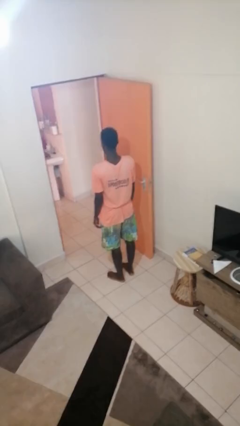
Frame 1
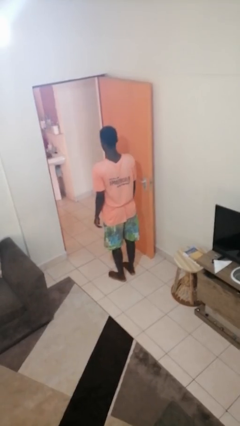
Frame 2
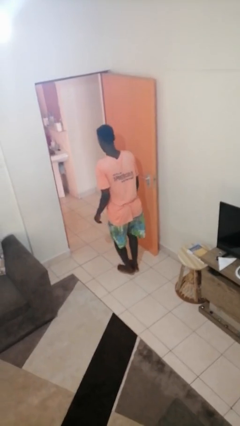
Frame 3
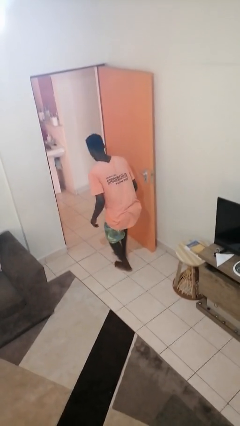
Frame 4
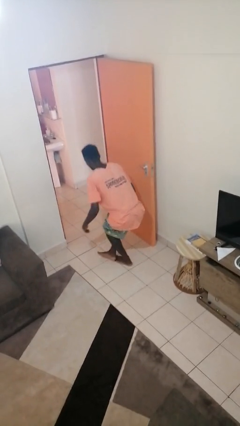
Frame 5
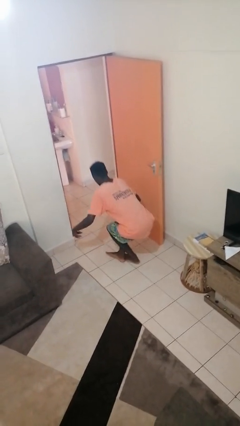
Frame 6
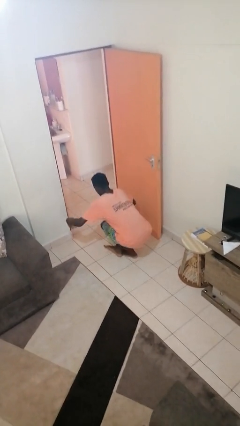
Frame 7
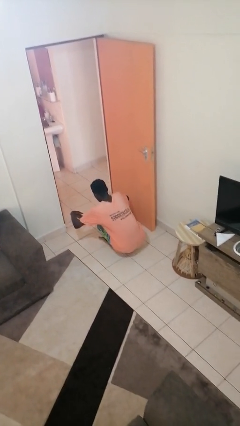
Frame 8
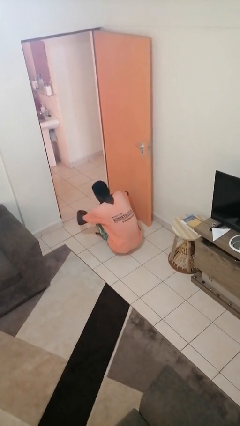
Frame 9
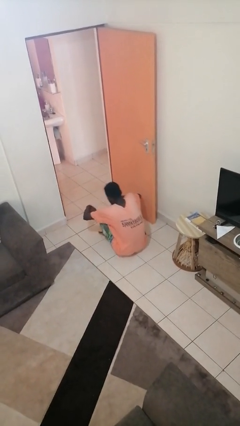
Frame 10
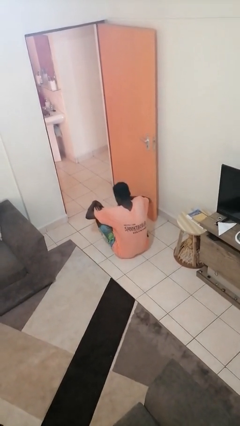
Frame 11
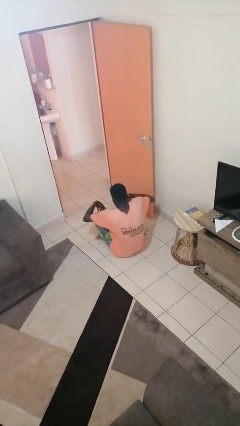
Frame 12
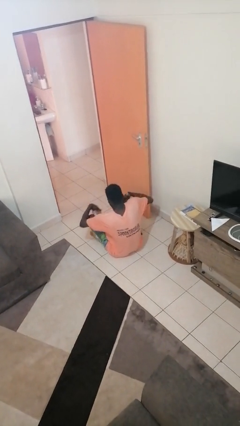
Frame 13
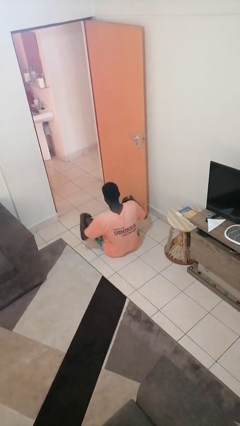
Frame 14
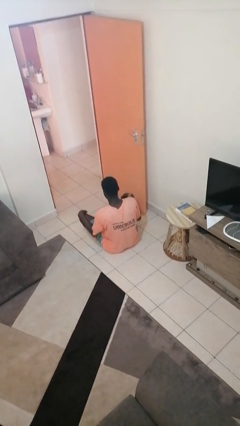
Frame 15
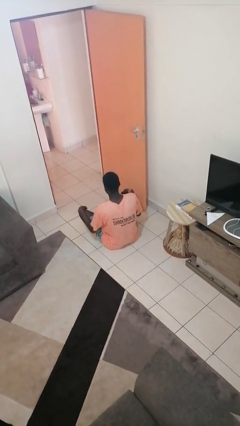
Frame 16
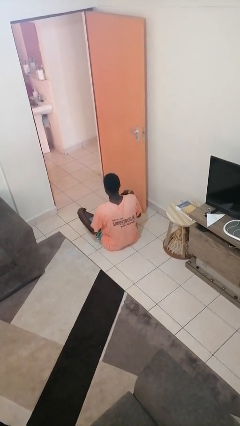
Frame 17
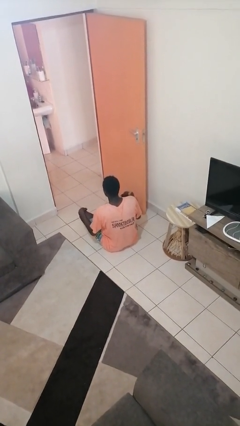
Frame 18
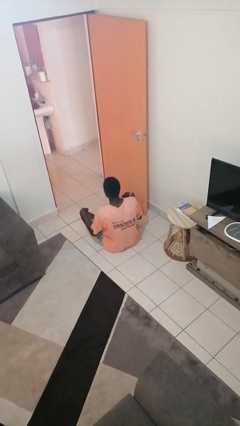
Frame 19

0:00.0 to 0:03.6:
person sits crisscross

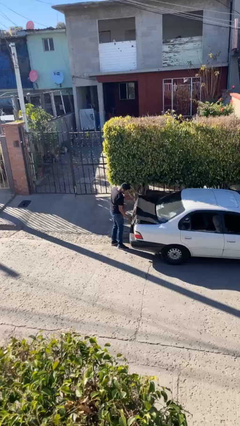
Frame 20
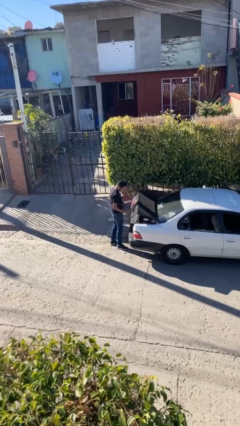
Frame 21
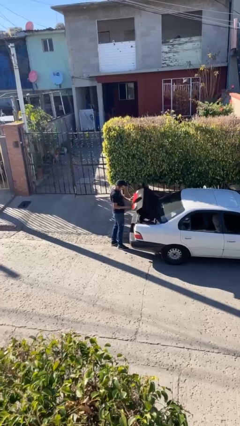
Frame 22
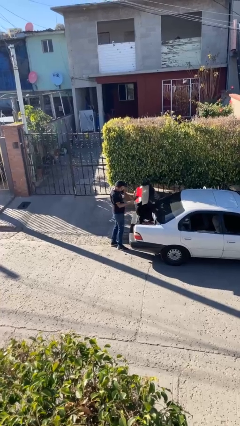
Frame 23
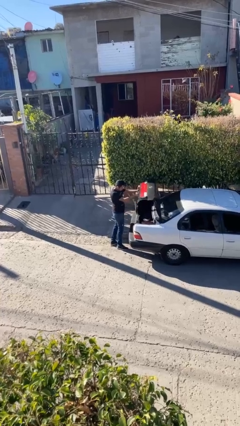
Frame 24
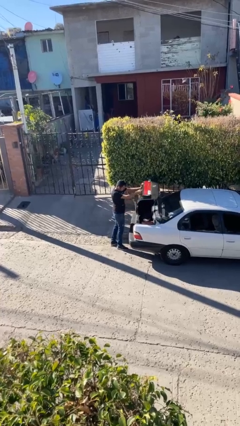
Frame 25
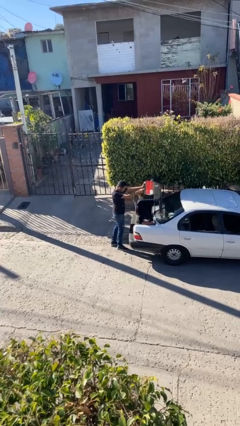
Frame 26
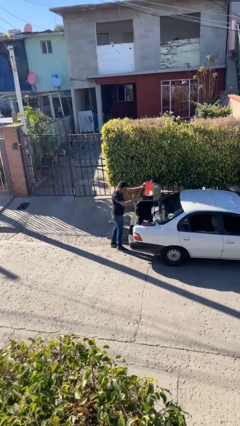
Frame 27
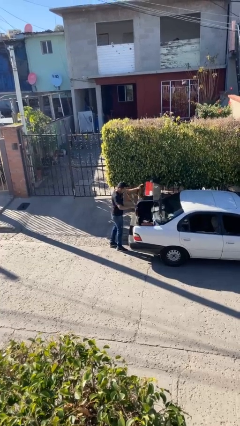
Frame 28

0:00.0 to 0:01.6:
person opens car trunk

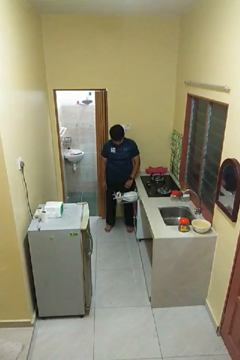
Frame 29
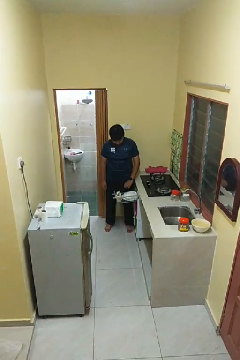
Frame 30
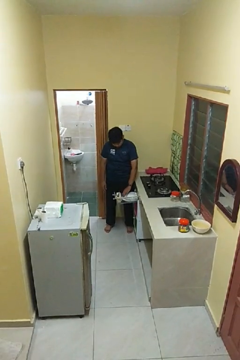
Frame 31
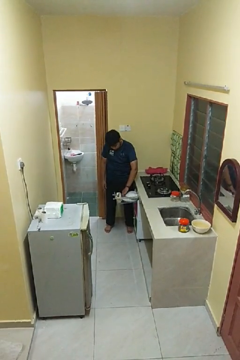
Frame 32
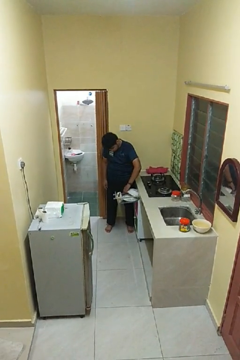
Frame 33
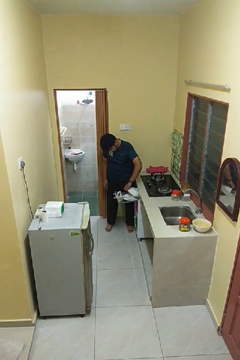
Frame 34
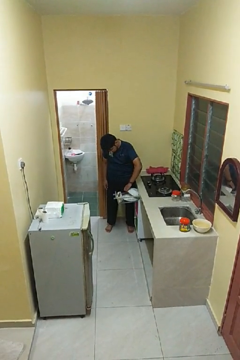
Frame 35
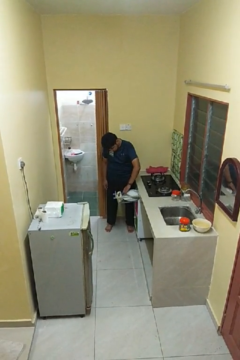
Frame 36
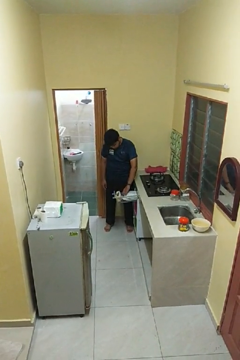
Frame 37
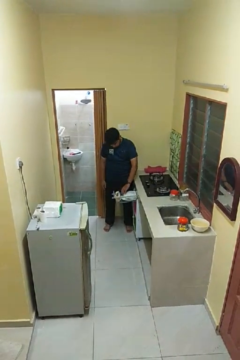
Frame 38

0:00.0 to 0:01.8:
person searches in kitchen drawer

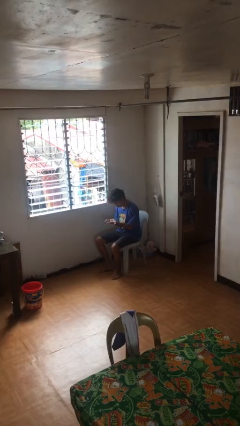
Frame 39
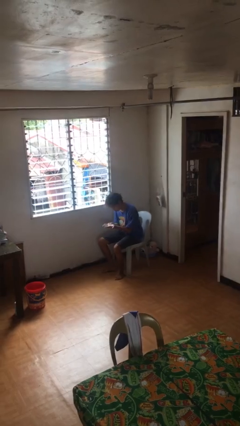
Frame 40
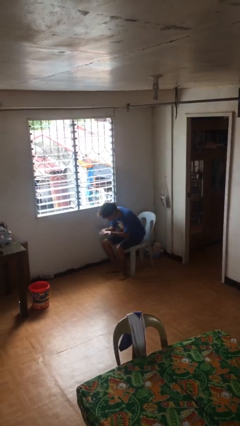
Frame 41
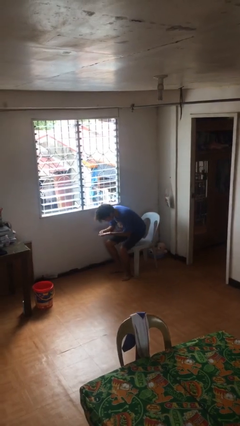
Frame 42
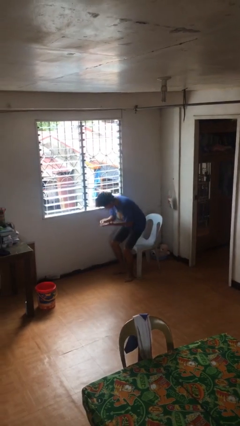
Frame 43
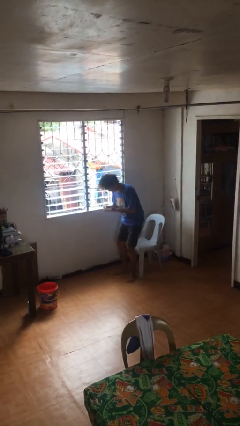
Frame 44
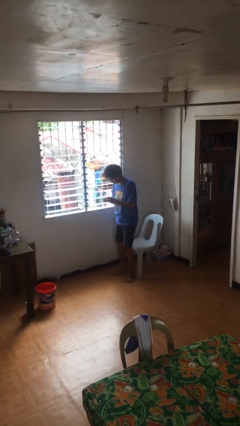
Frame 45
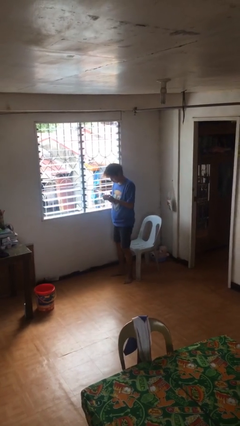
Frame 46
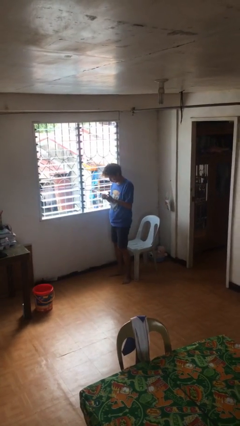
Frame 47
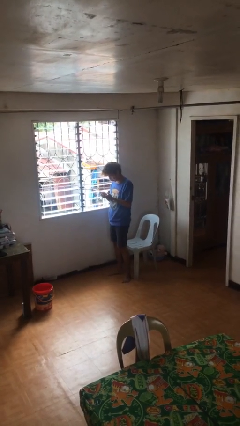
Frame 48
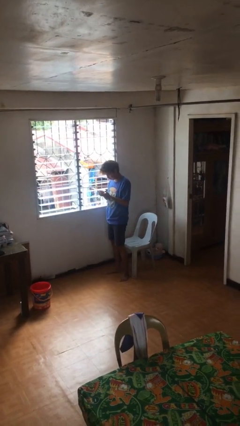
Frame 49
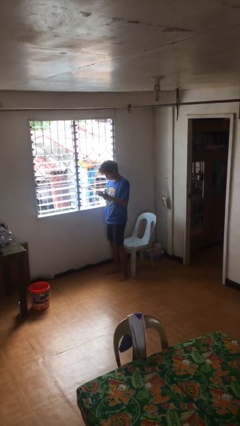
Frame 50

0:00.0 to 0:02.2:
person stands up

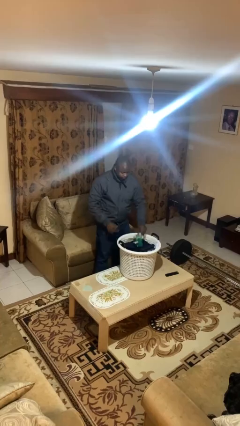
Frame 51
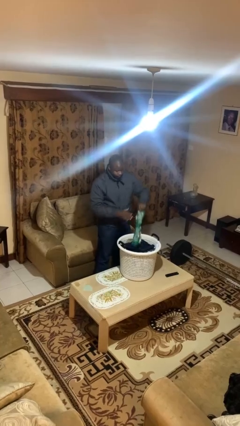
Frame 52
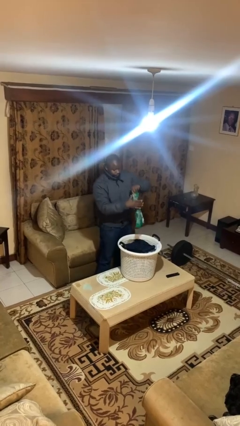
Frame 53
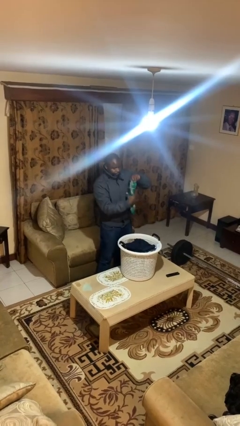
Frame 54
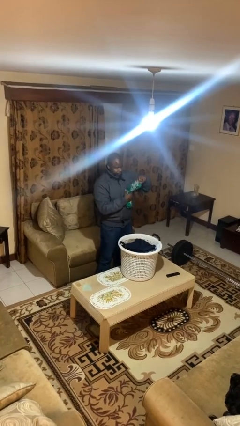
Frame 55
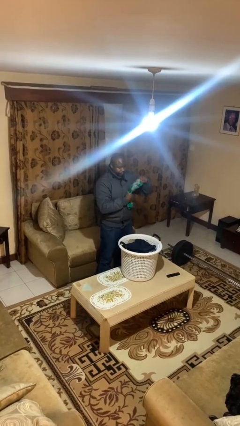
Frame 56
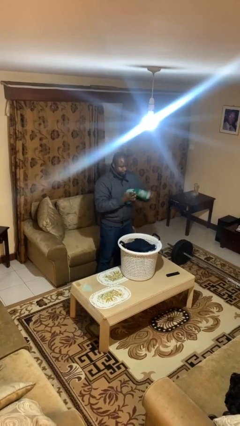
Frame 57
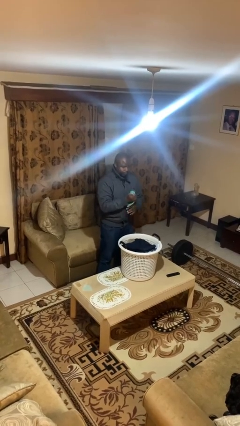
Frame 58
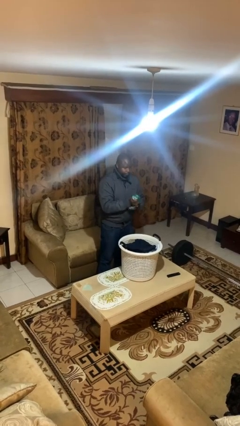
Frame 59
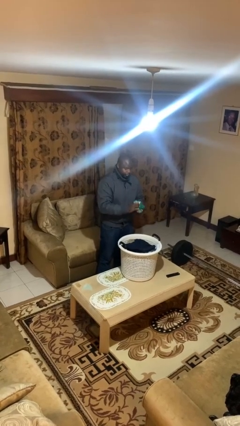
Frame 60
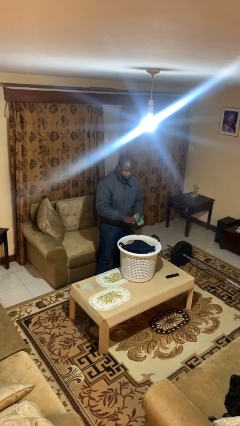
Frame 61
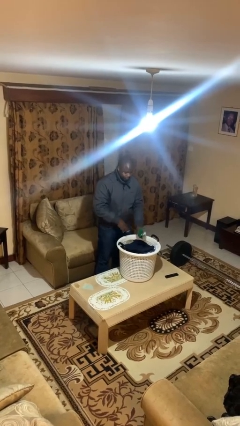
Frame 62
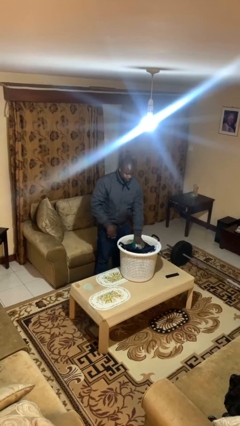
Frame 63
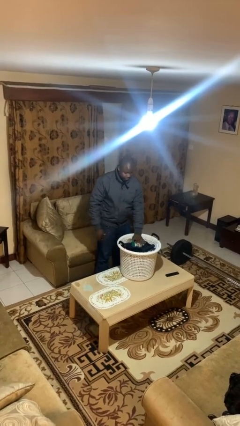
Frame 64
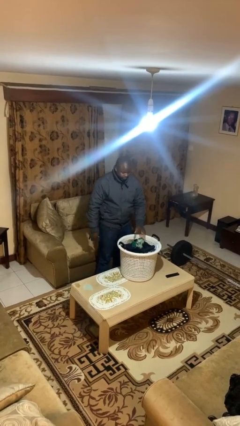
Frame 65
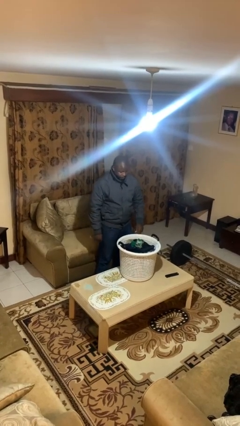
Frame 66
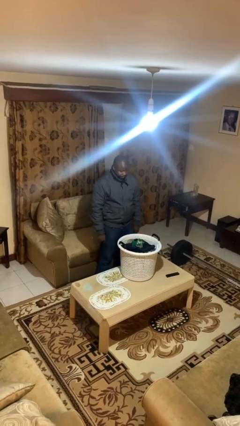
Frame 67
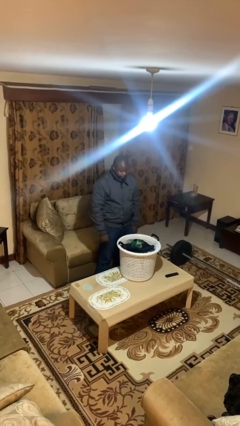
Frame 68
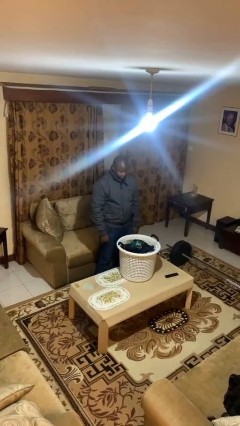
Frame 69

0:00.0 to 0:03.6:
person folds socks

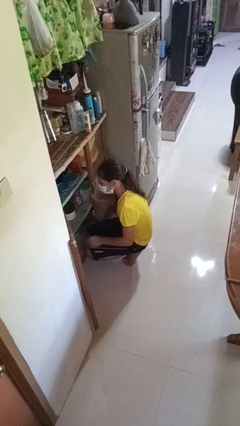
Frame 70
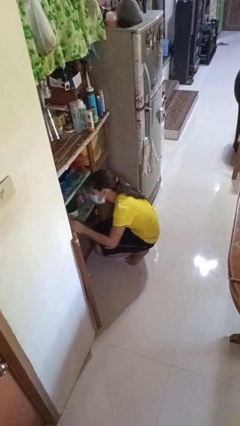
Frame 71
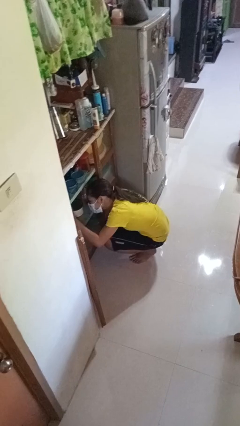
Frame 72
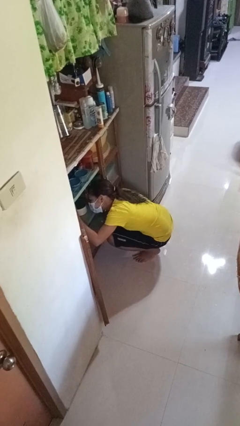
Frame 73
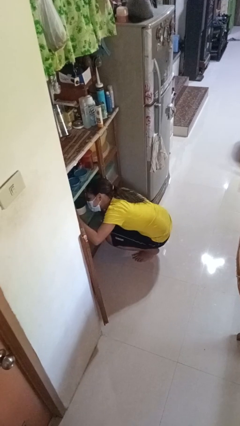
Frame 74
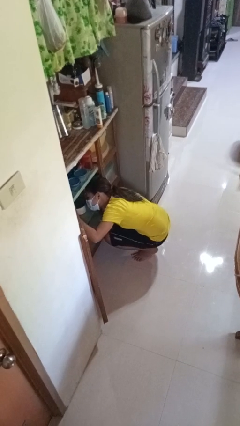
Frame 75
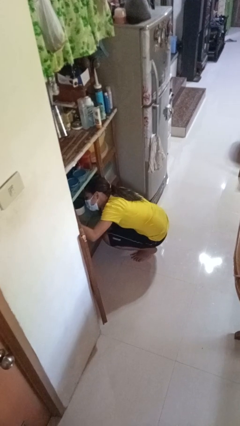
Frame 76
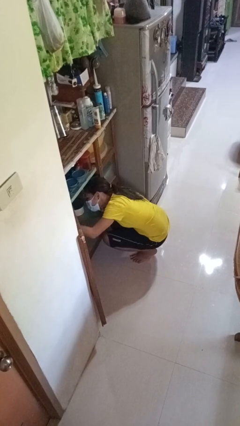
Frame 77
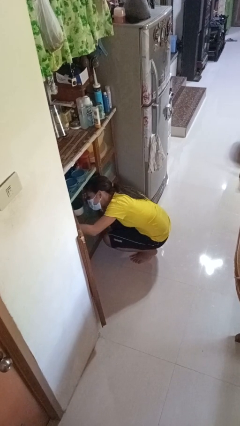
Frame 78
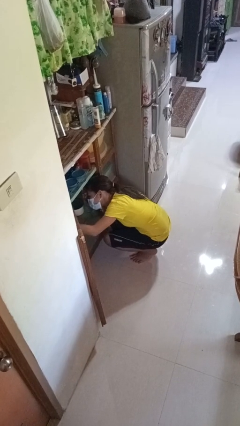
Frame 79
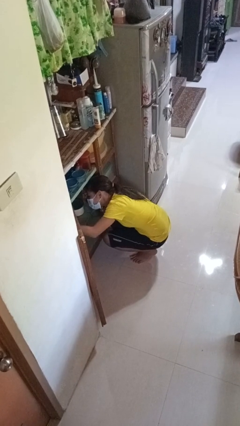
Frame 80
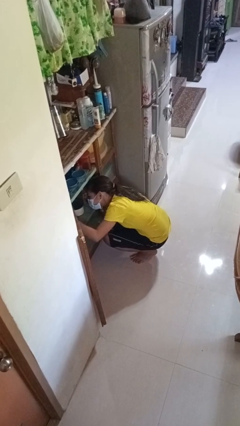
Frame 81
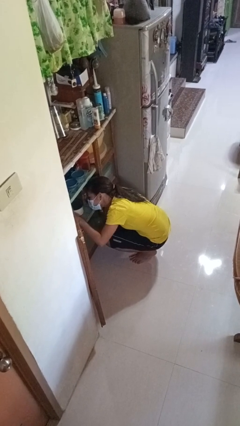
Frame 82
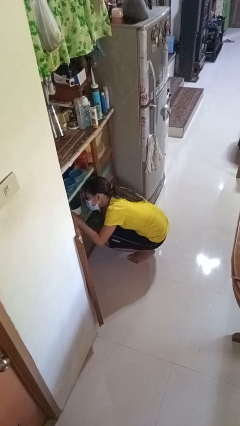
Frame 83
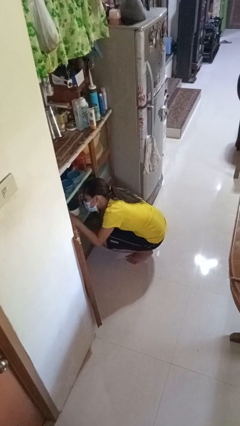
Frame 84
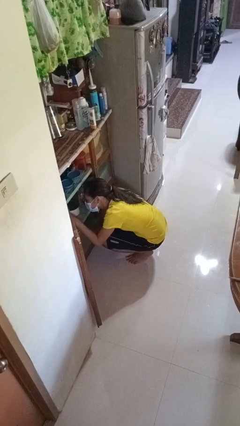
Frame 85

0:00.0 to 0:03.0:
person searches in cabinet

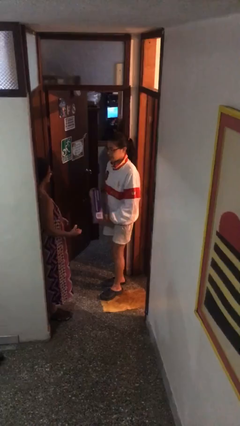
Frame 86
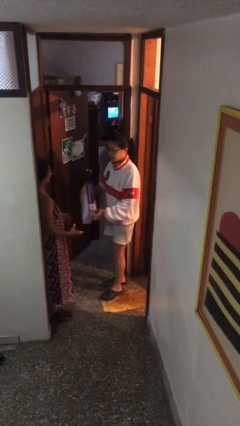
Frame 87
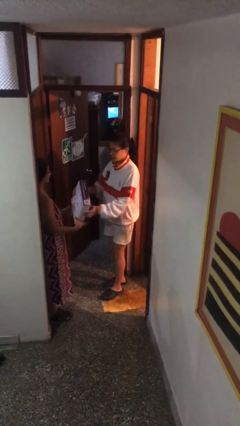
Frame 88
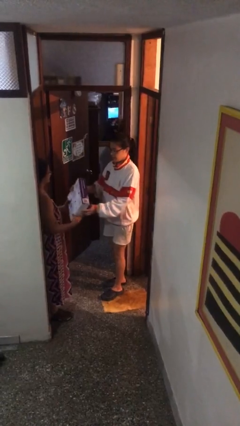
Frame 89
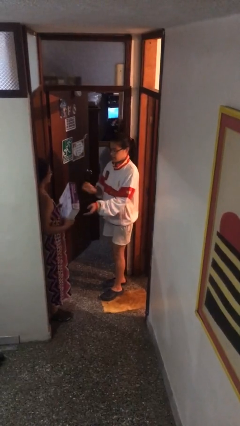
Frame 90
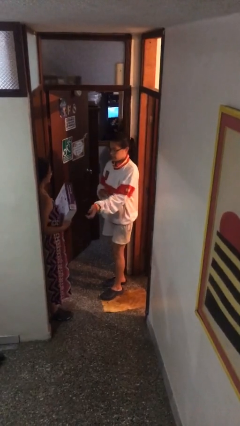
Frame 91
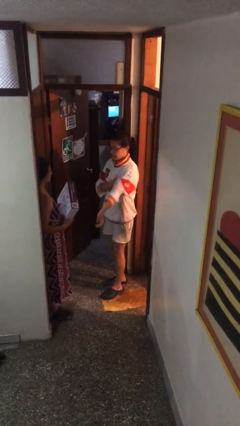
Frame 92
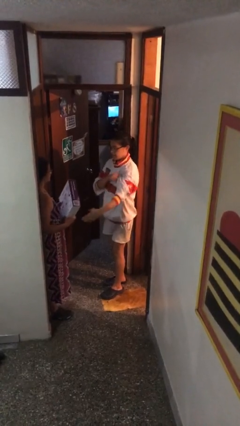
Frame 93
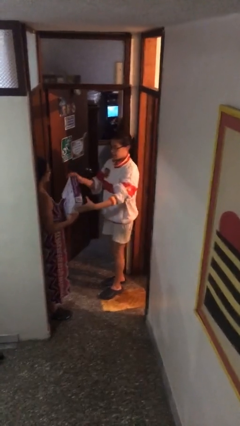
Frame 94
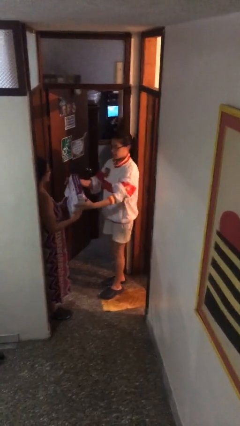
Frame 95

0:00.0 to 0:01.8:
person transfers object to person
